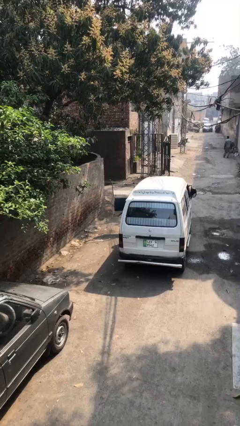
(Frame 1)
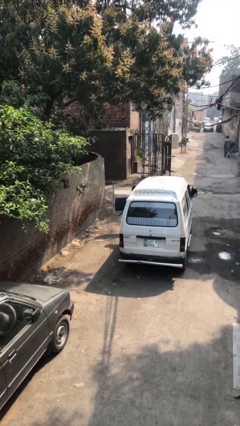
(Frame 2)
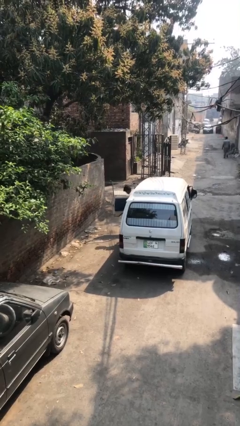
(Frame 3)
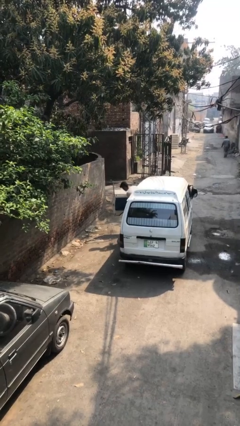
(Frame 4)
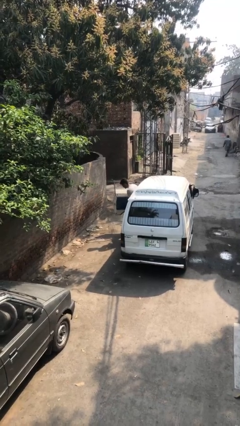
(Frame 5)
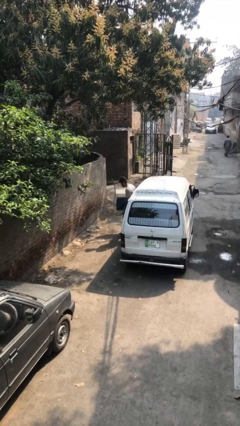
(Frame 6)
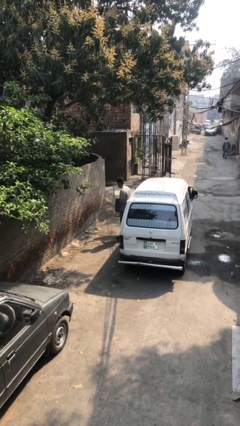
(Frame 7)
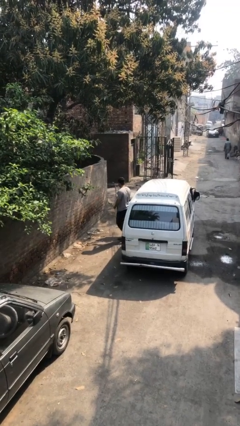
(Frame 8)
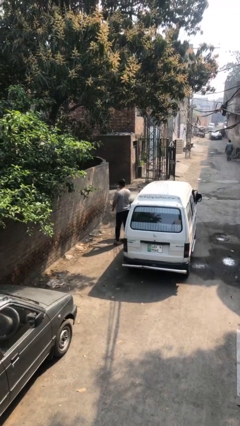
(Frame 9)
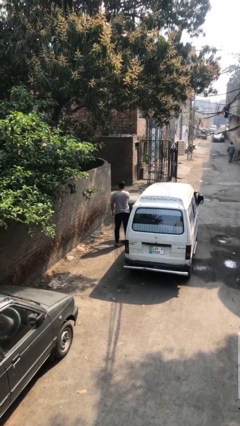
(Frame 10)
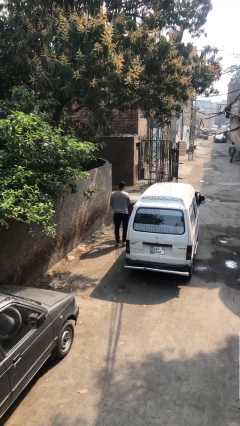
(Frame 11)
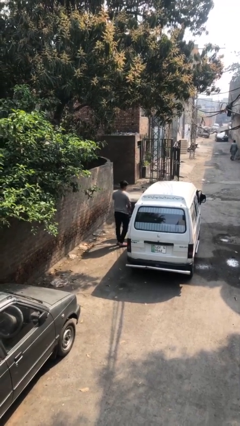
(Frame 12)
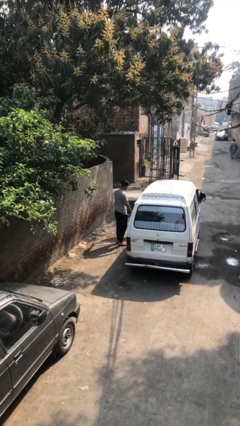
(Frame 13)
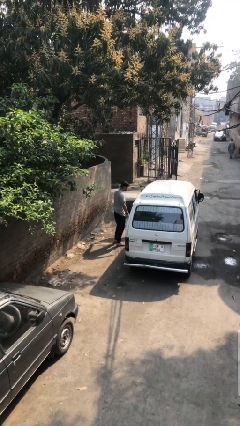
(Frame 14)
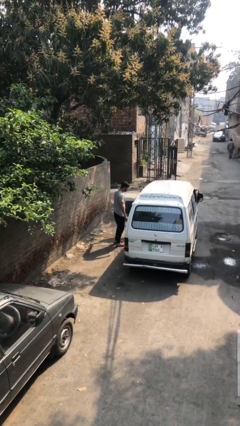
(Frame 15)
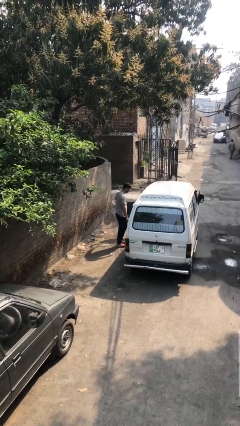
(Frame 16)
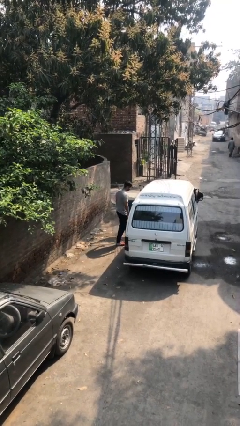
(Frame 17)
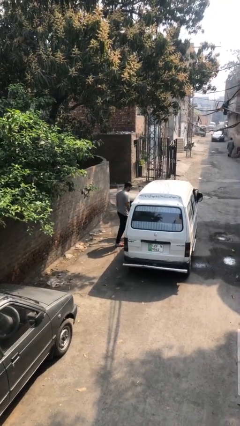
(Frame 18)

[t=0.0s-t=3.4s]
person exits car

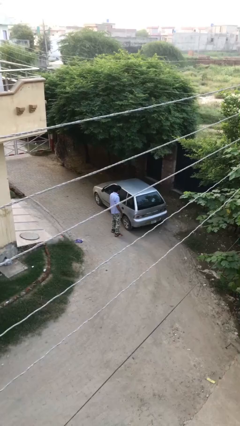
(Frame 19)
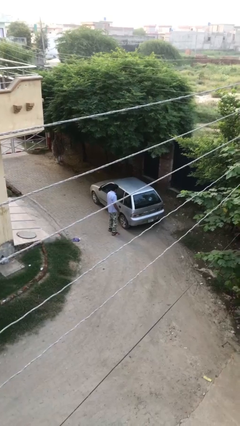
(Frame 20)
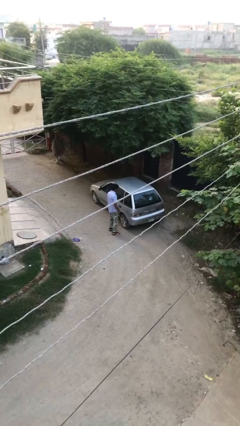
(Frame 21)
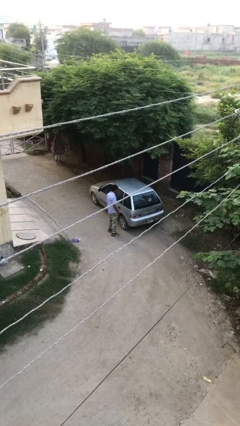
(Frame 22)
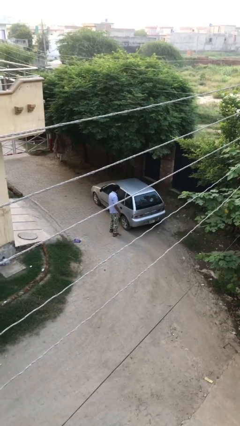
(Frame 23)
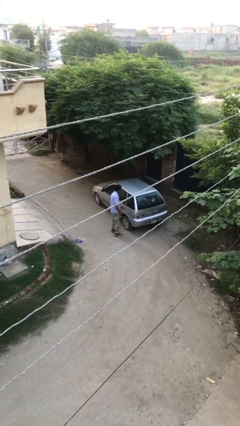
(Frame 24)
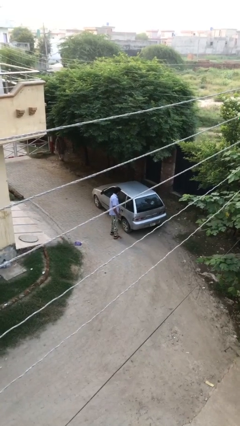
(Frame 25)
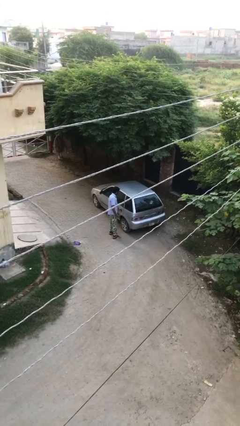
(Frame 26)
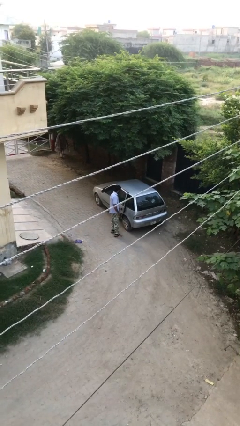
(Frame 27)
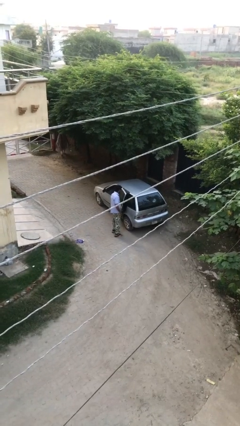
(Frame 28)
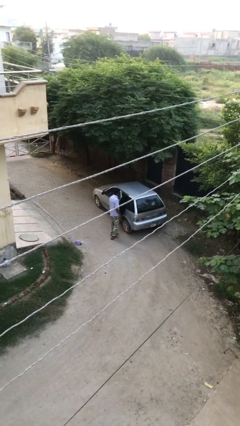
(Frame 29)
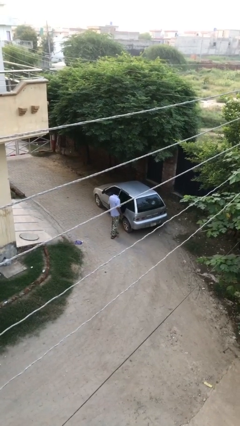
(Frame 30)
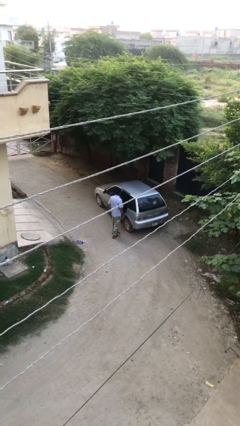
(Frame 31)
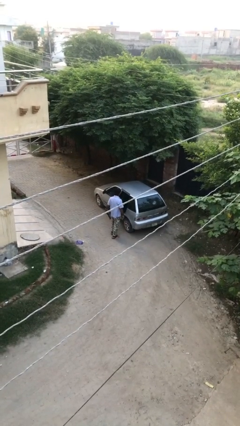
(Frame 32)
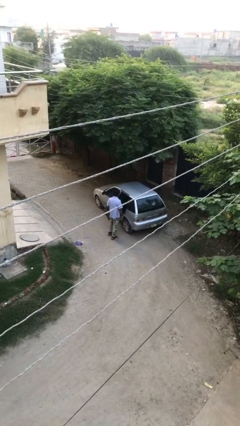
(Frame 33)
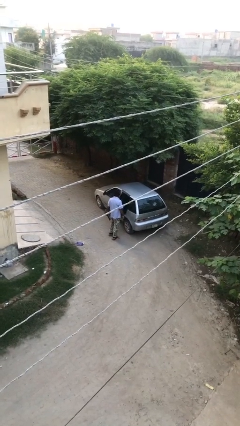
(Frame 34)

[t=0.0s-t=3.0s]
person opens car door

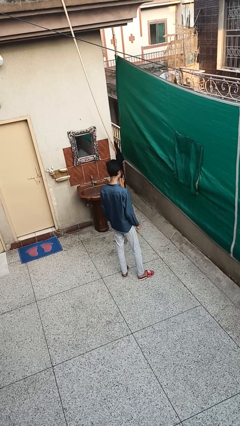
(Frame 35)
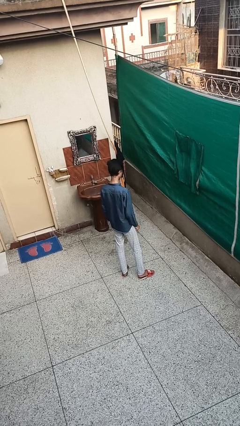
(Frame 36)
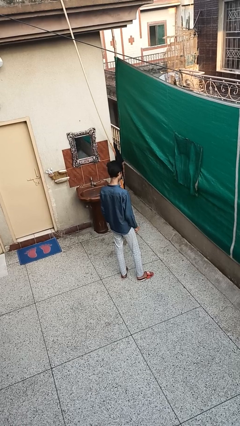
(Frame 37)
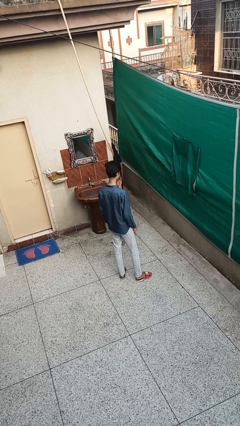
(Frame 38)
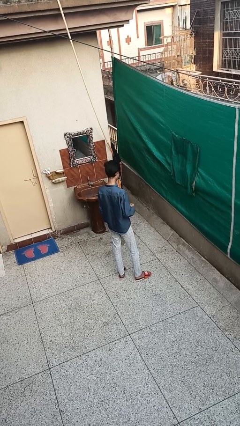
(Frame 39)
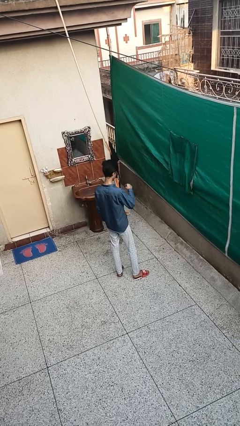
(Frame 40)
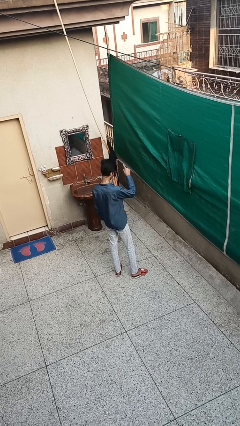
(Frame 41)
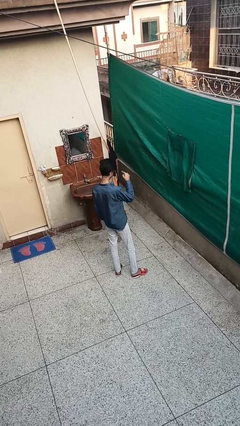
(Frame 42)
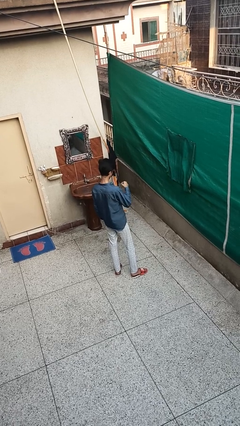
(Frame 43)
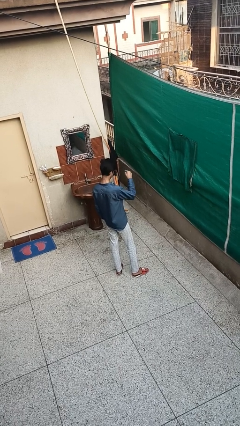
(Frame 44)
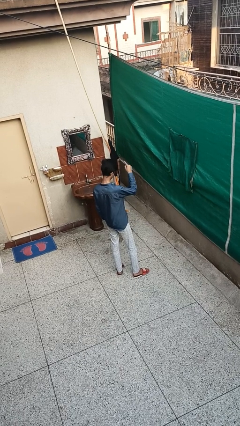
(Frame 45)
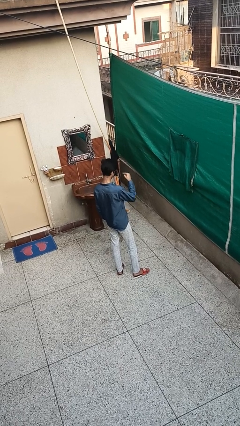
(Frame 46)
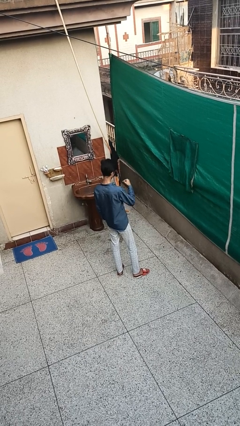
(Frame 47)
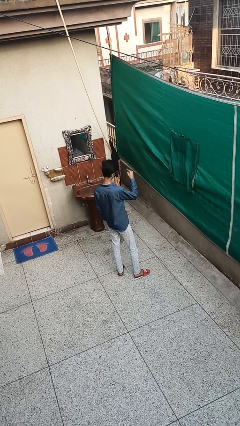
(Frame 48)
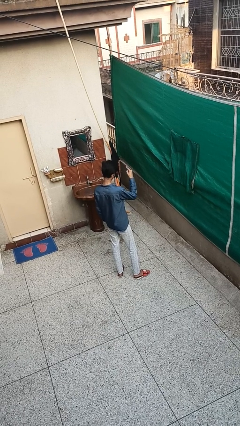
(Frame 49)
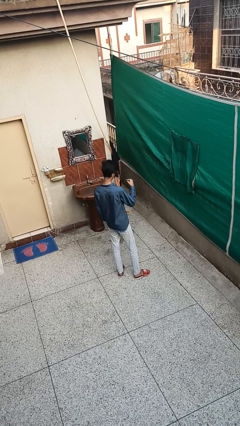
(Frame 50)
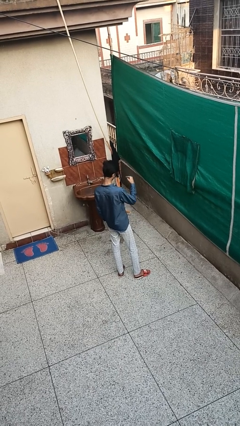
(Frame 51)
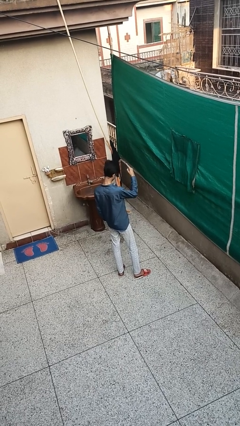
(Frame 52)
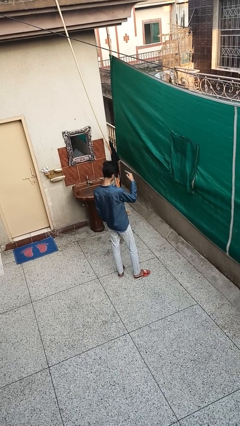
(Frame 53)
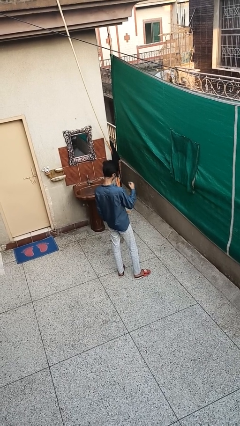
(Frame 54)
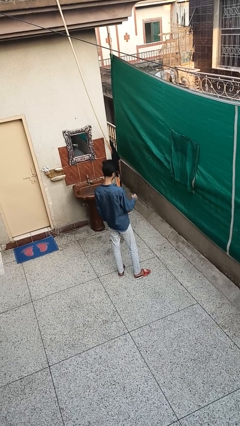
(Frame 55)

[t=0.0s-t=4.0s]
person gestures swipe up

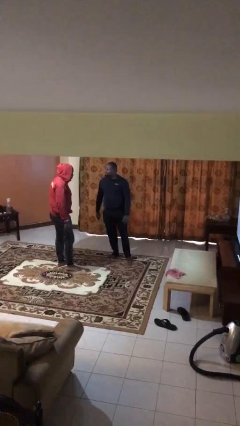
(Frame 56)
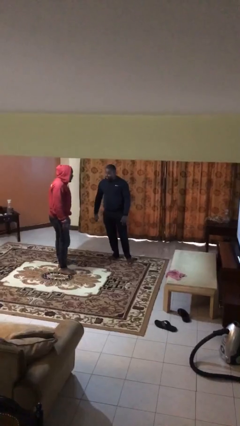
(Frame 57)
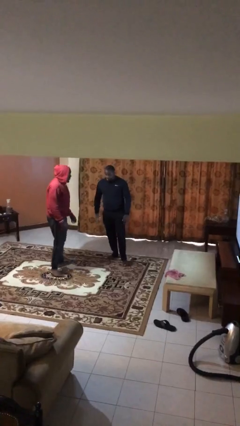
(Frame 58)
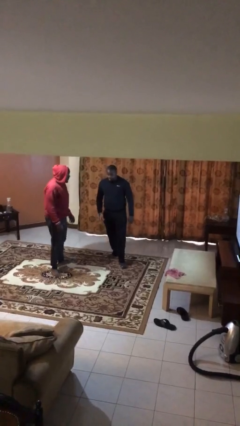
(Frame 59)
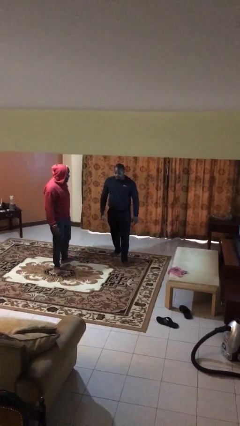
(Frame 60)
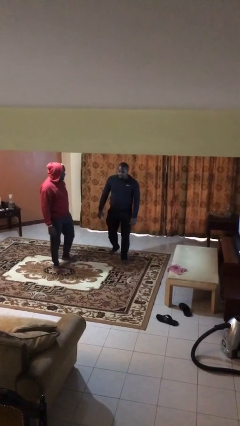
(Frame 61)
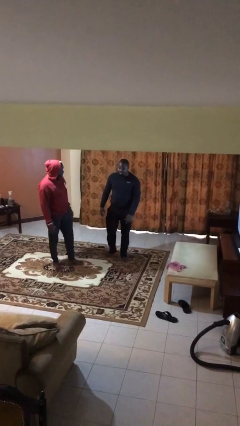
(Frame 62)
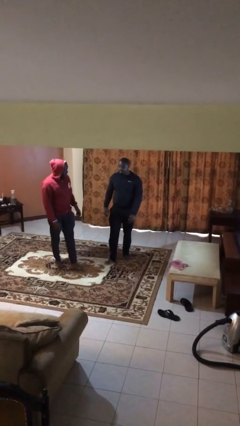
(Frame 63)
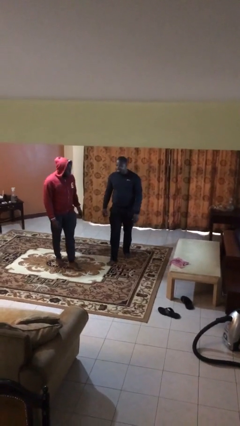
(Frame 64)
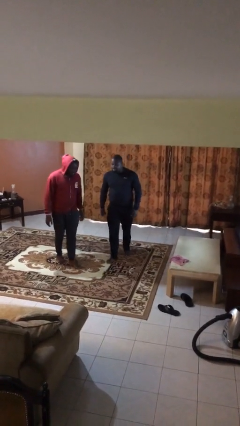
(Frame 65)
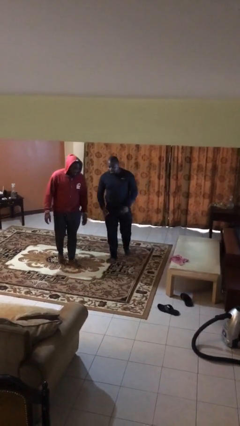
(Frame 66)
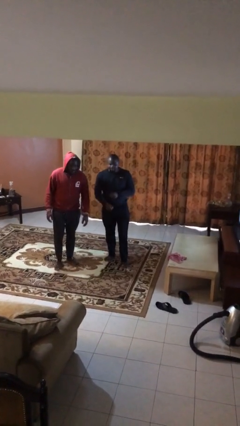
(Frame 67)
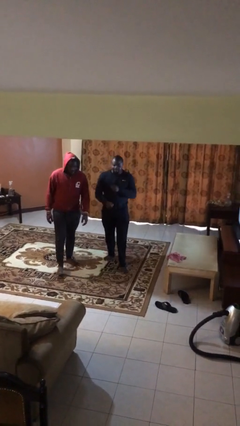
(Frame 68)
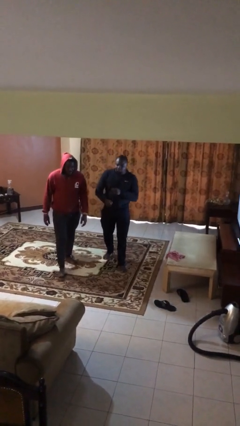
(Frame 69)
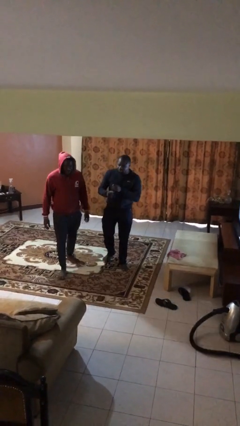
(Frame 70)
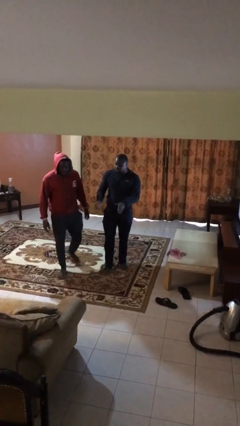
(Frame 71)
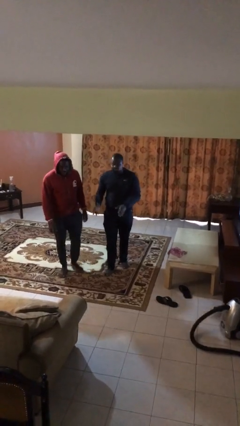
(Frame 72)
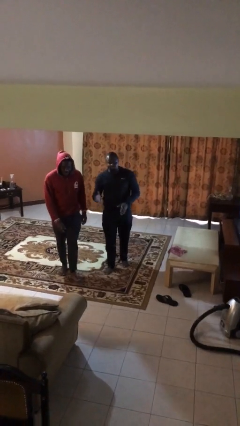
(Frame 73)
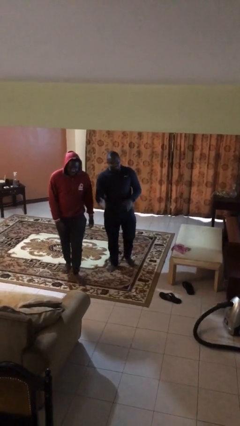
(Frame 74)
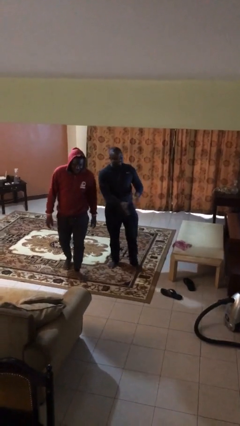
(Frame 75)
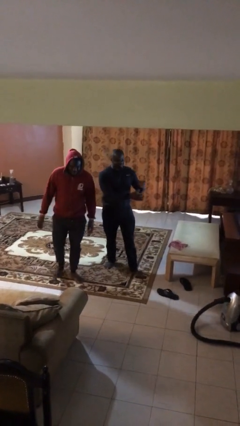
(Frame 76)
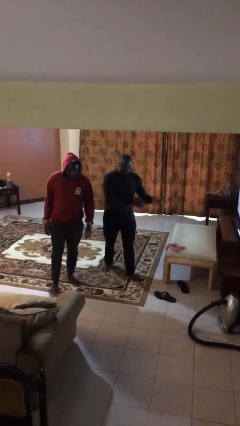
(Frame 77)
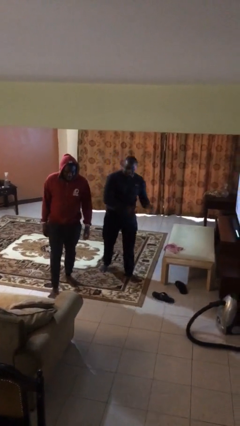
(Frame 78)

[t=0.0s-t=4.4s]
person talks to person

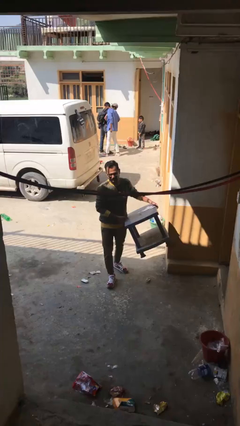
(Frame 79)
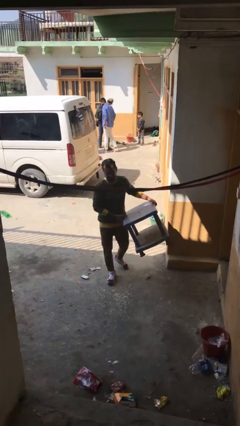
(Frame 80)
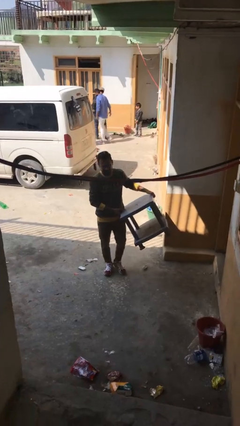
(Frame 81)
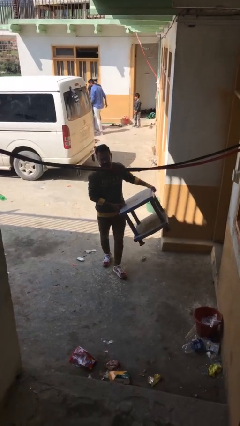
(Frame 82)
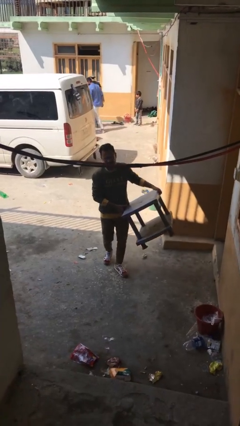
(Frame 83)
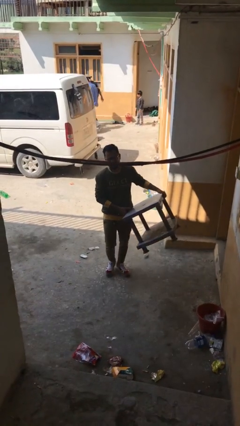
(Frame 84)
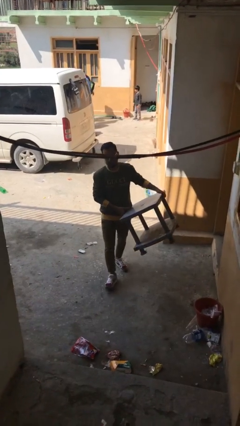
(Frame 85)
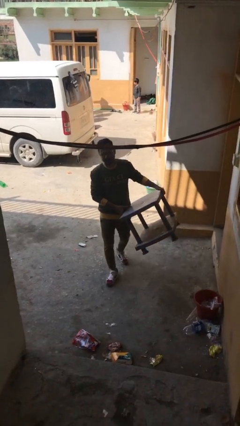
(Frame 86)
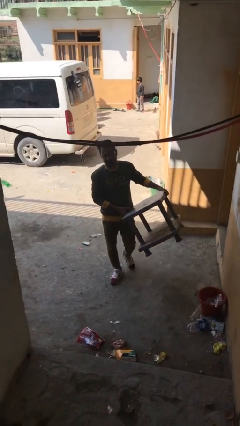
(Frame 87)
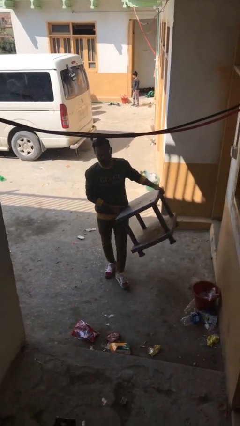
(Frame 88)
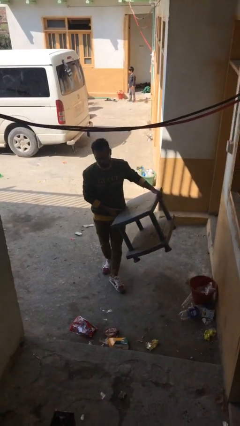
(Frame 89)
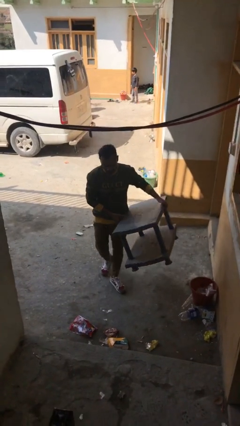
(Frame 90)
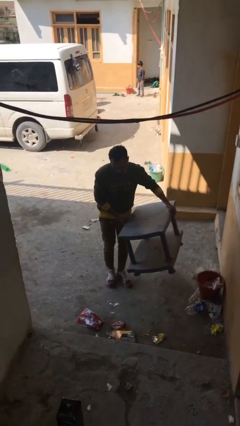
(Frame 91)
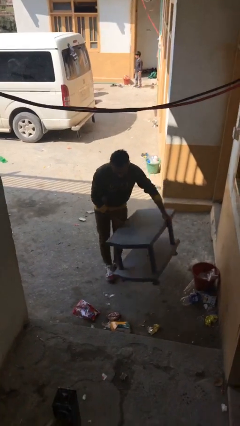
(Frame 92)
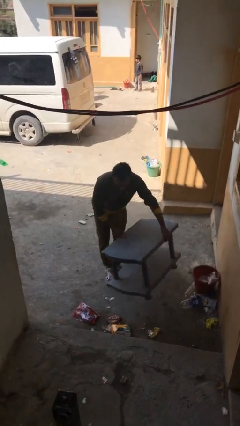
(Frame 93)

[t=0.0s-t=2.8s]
person carries heavy object
